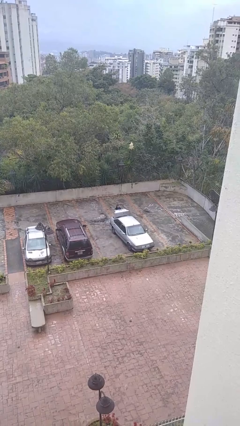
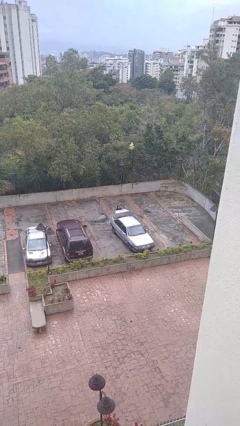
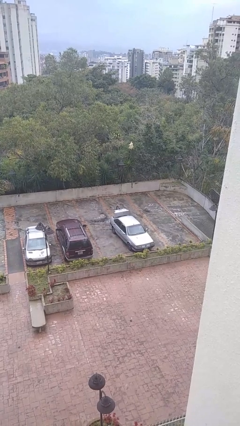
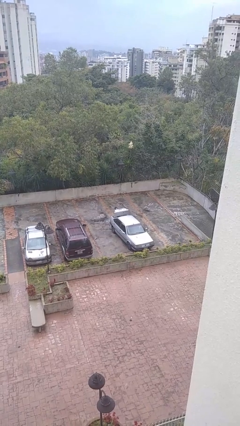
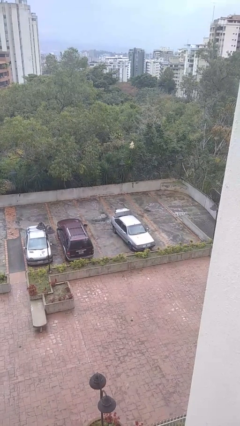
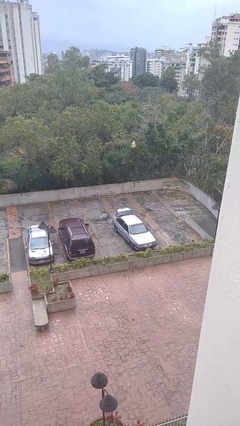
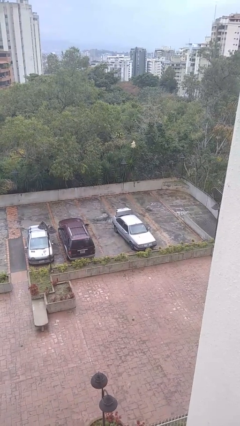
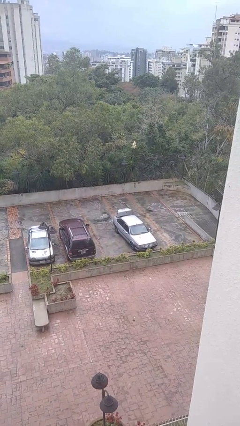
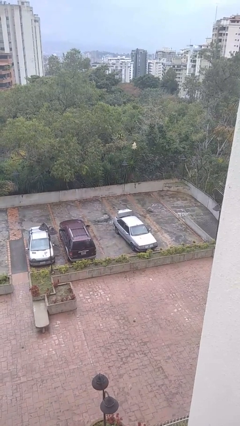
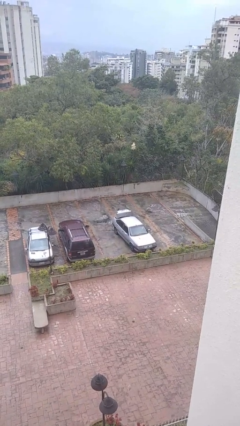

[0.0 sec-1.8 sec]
person loads car

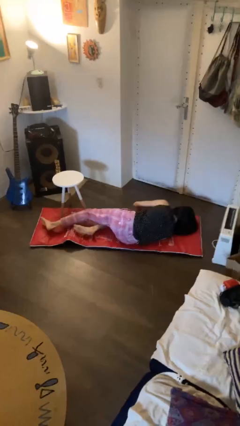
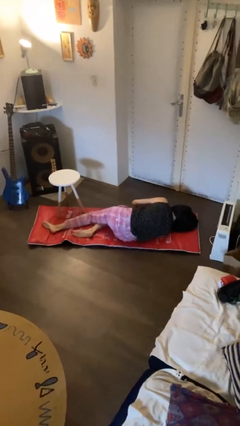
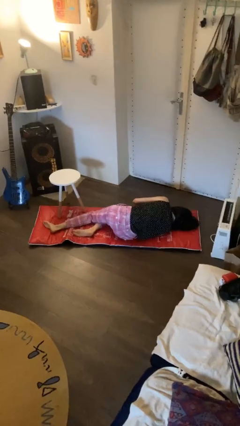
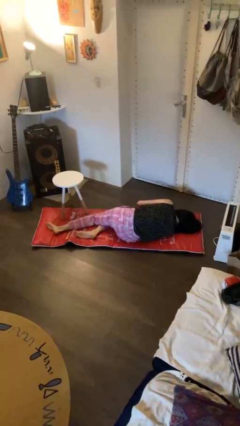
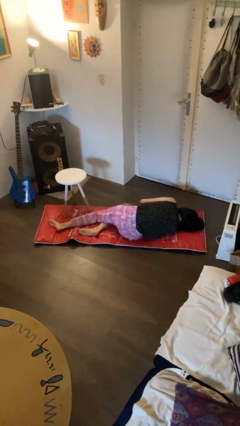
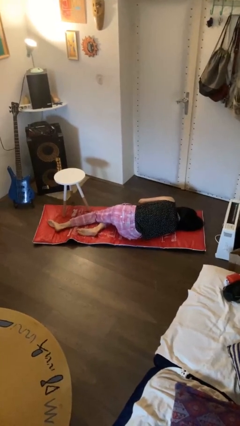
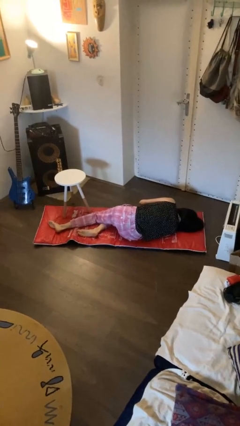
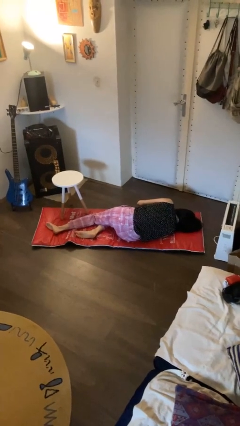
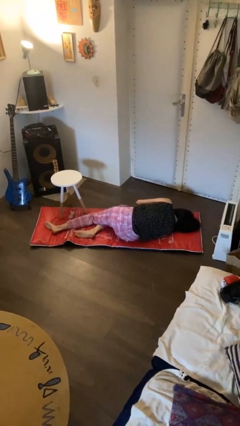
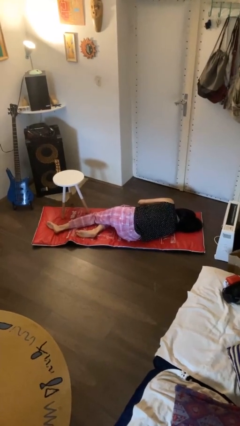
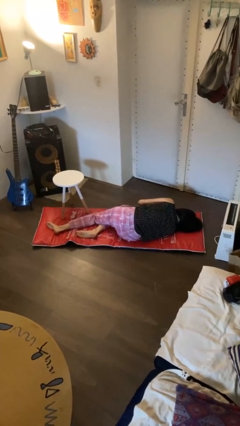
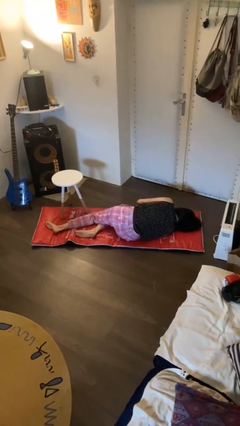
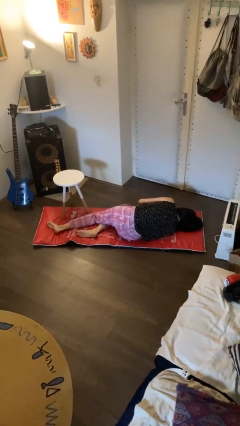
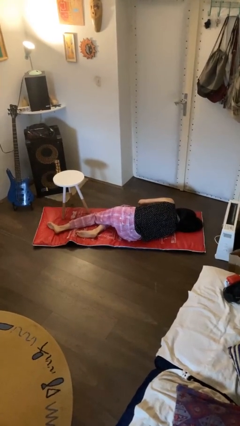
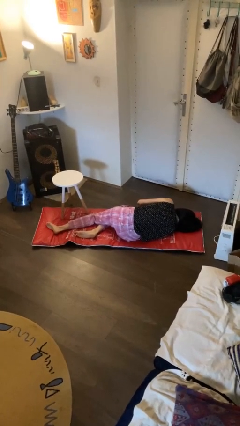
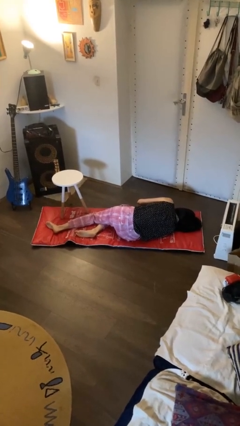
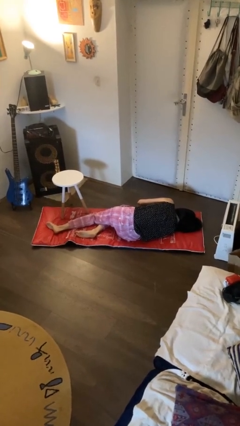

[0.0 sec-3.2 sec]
person lies down on floor

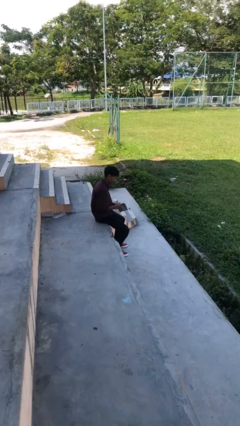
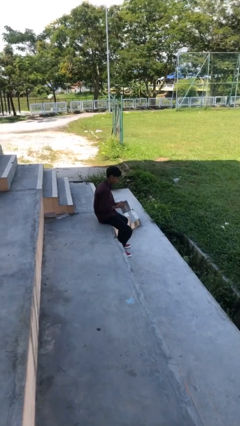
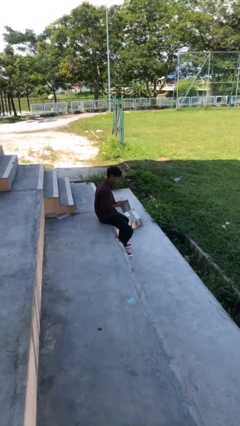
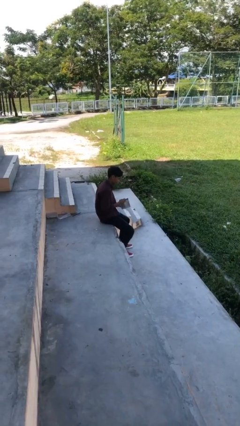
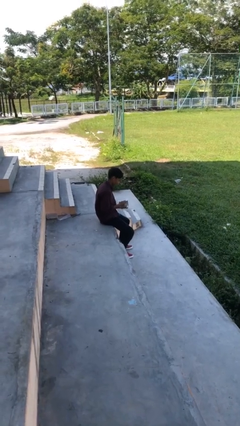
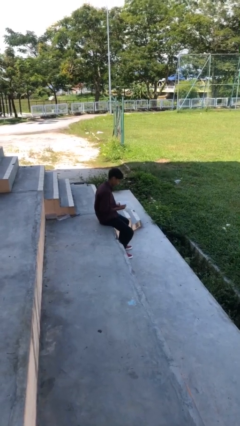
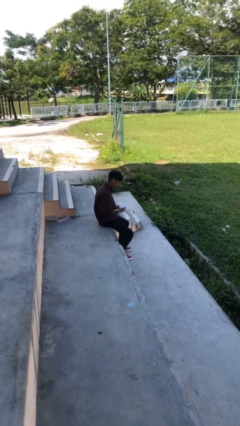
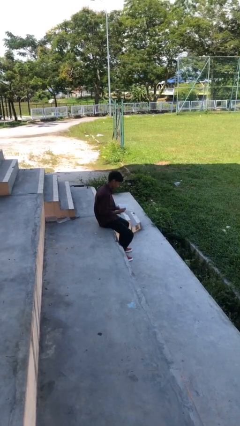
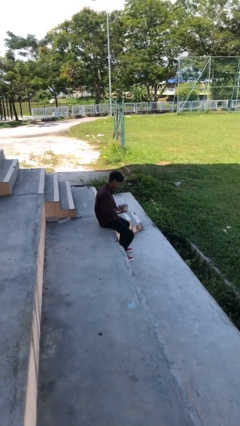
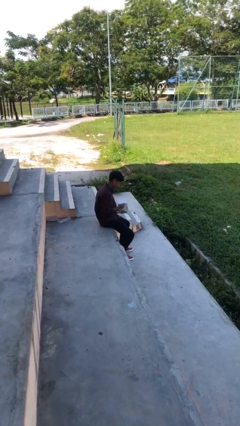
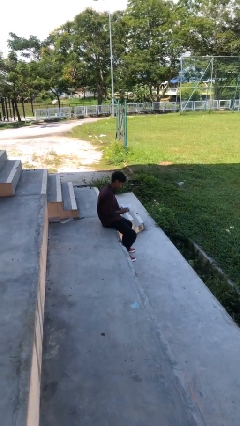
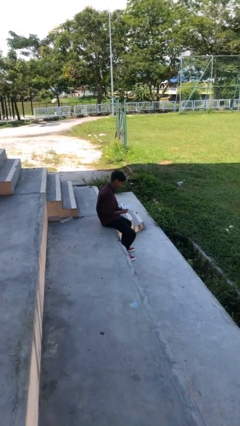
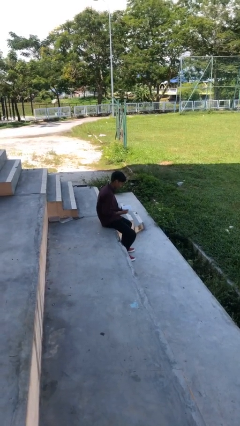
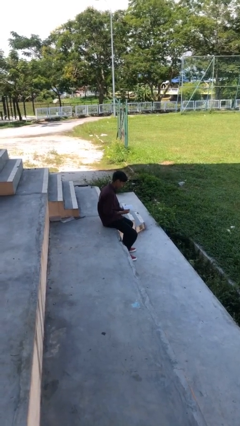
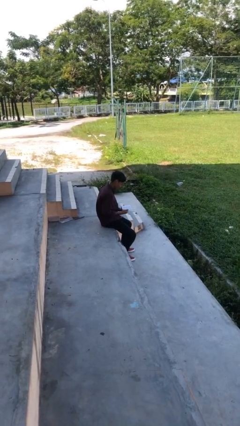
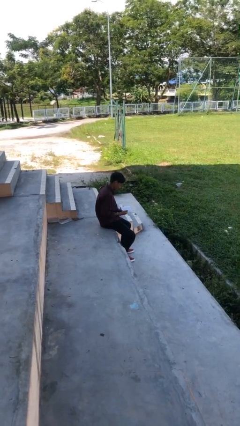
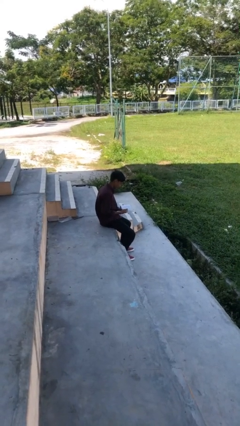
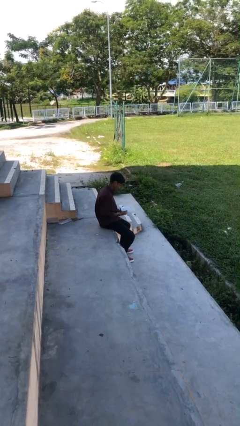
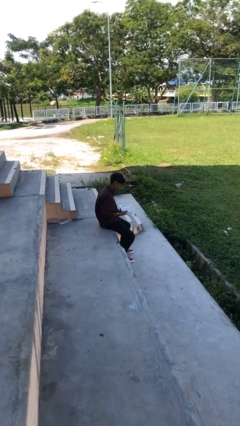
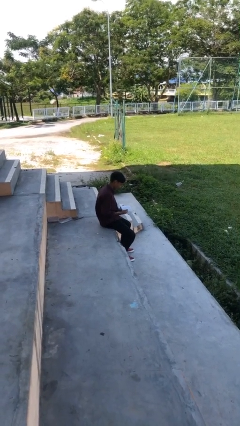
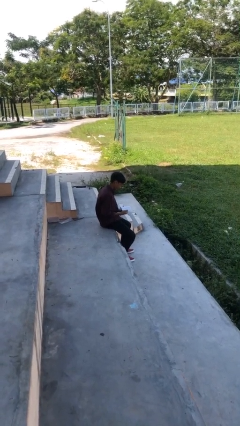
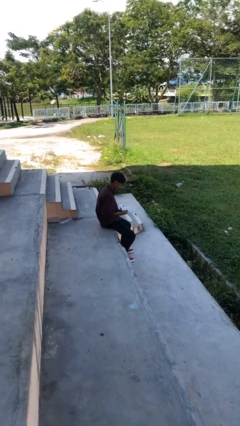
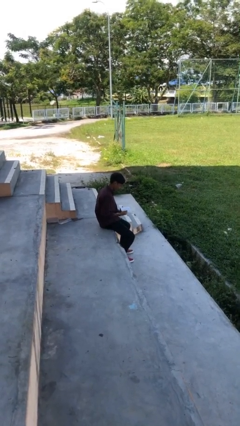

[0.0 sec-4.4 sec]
person reads document

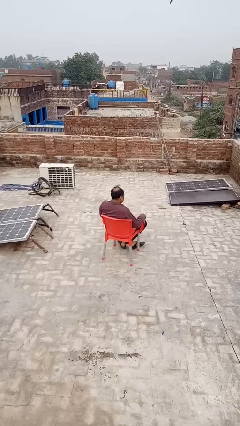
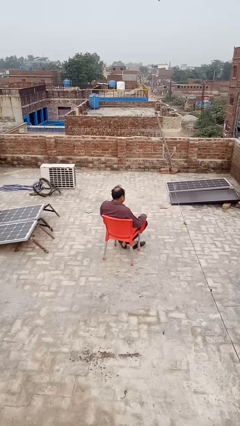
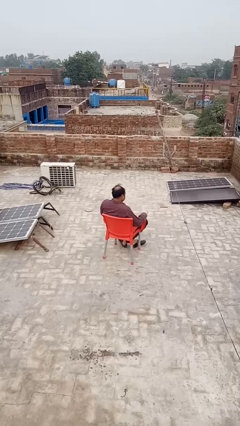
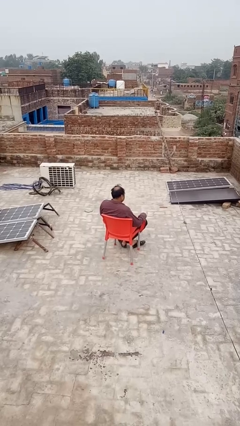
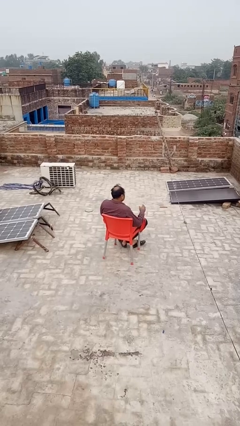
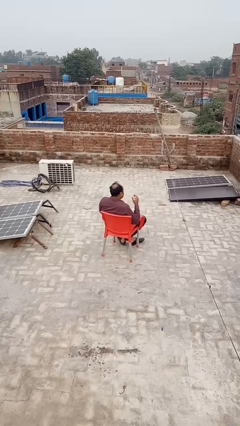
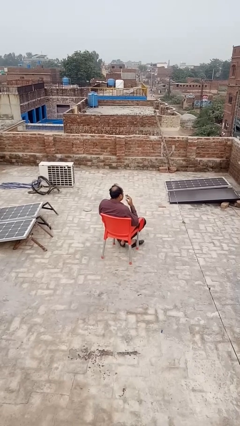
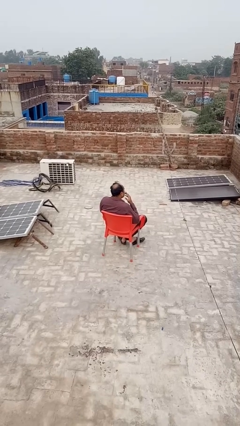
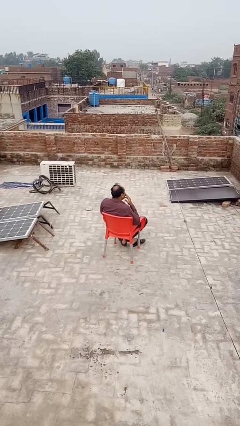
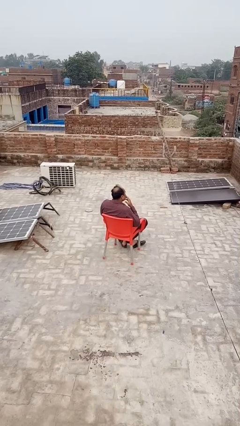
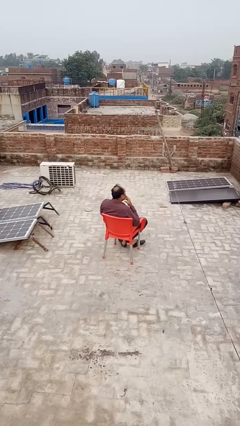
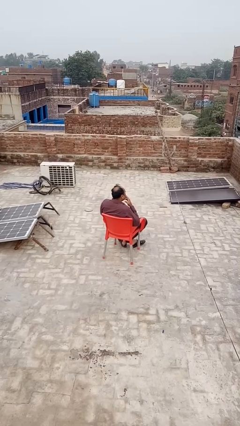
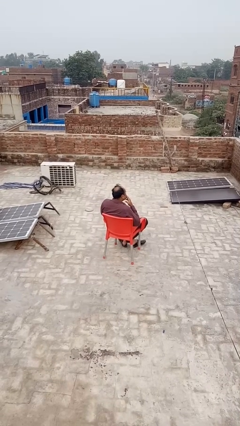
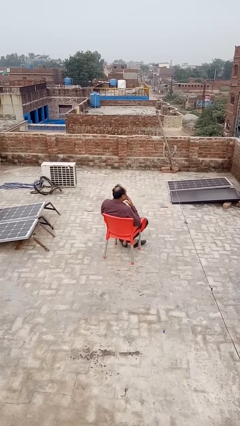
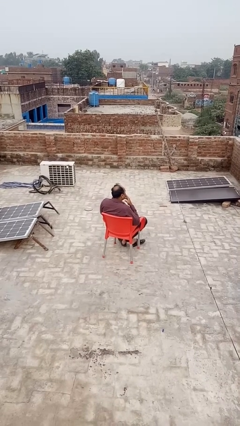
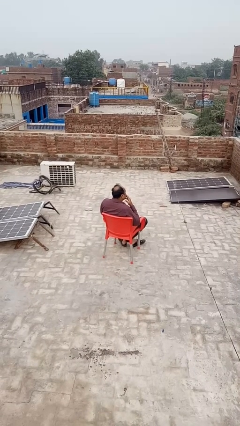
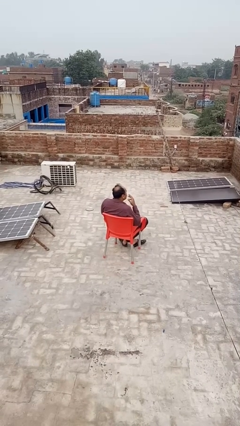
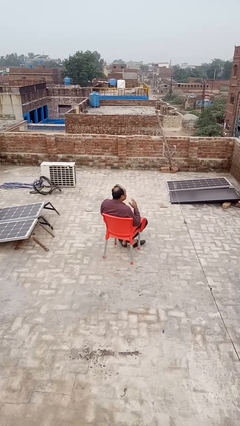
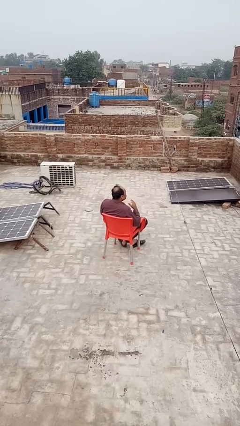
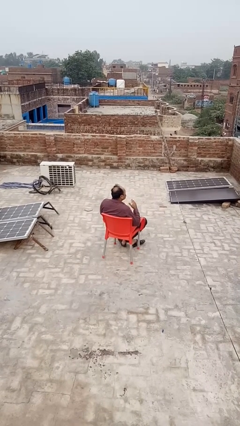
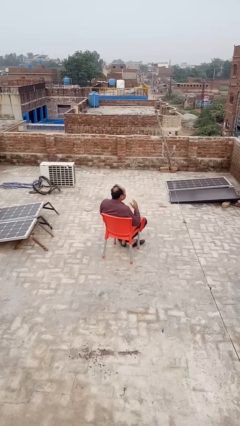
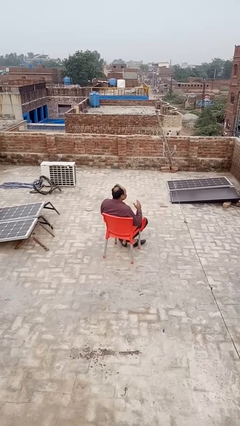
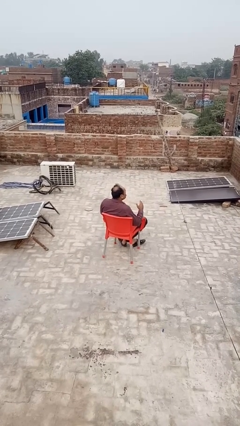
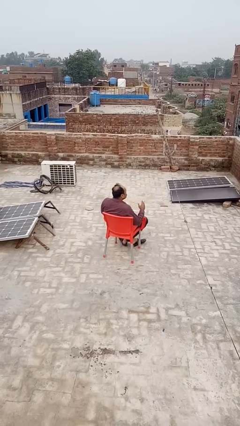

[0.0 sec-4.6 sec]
person vapes

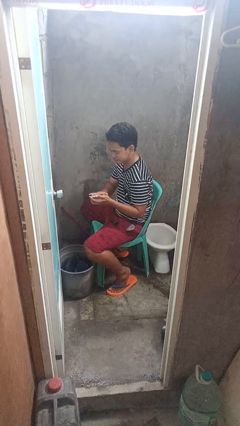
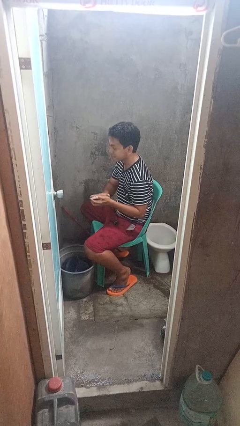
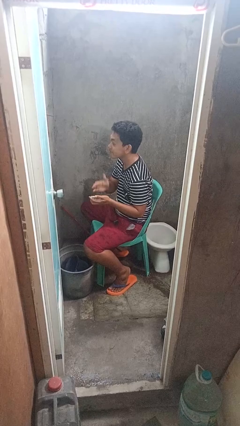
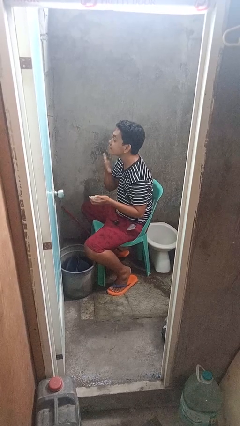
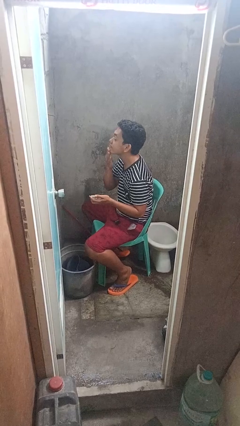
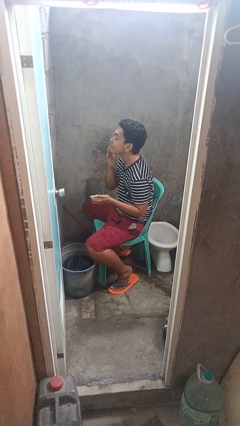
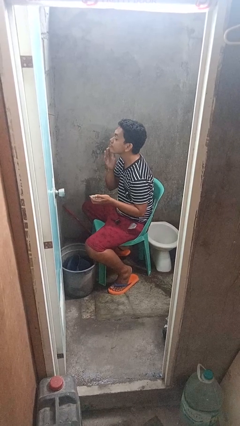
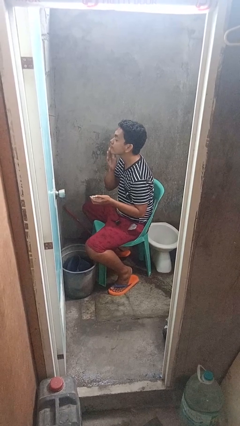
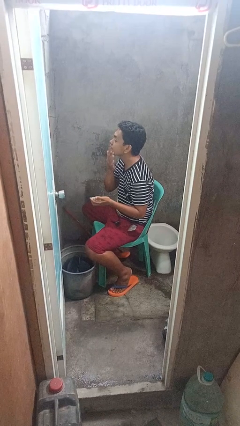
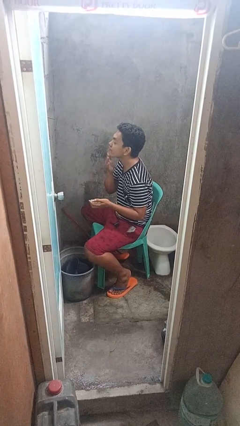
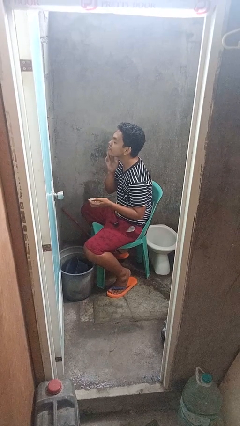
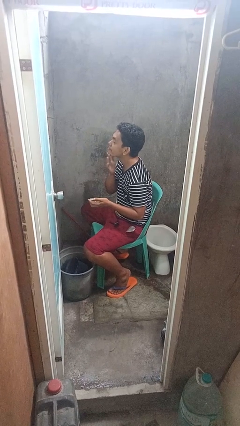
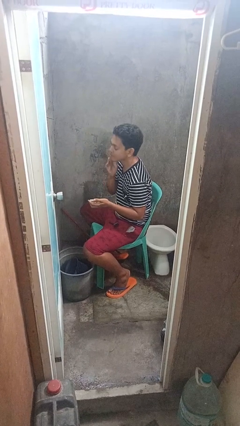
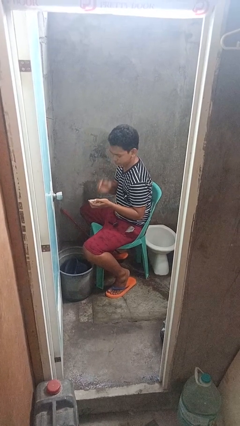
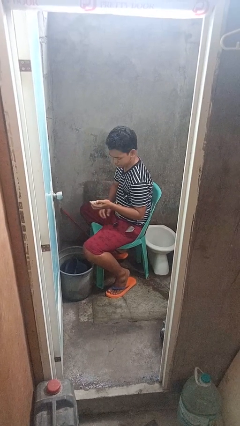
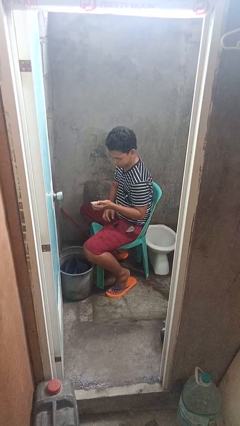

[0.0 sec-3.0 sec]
person applies shaving cream

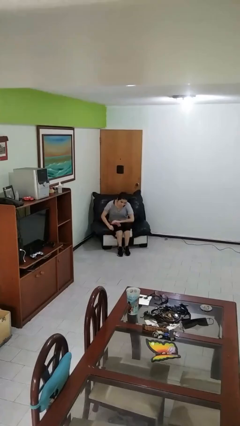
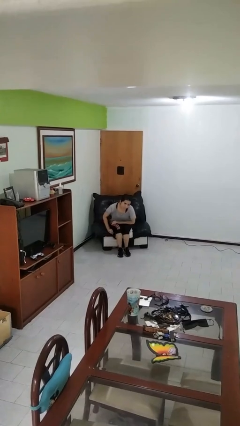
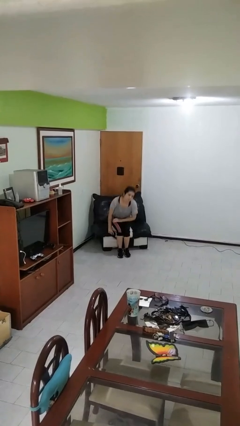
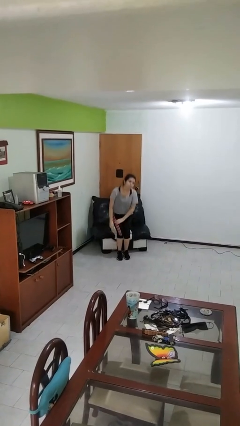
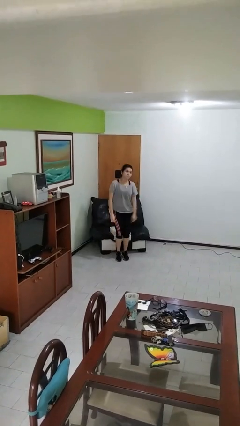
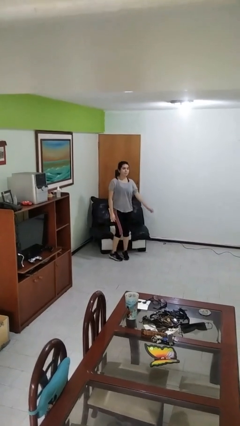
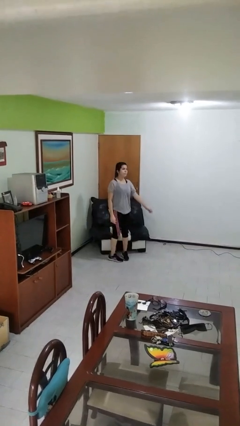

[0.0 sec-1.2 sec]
person stands up
